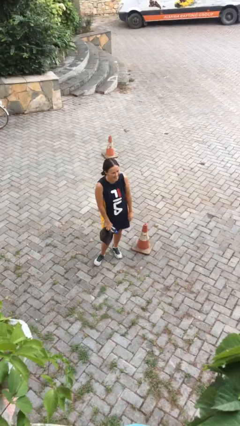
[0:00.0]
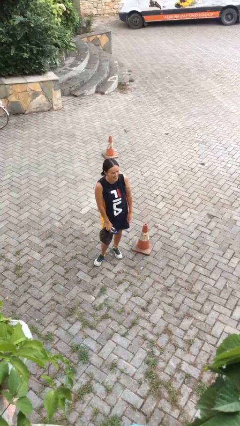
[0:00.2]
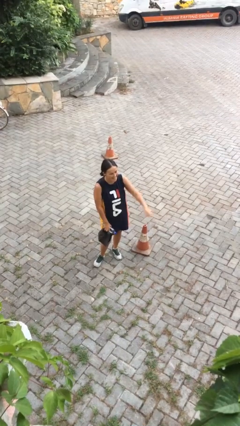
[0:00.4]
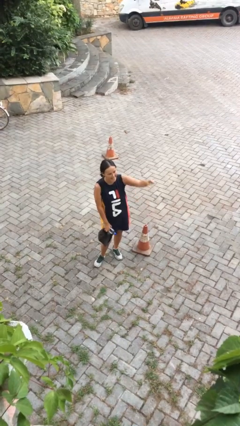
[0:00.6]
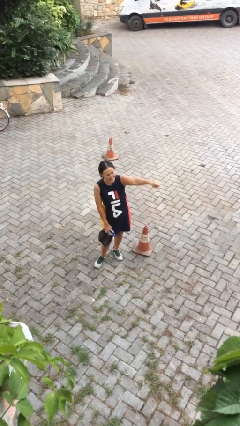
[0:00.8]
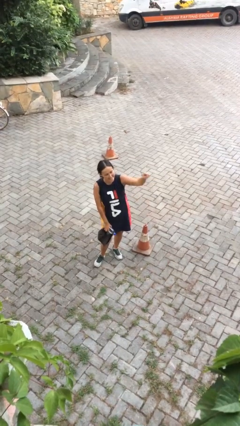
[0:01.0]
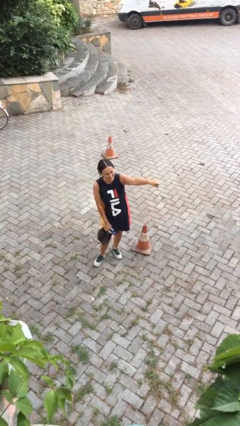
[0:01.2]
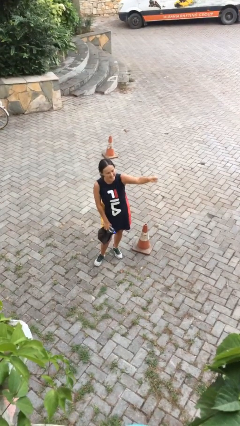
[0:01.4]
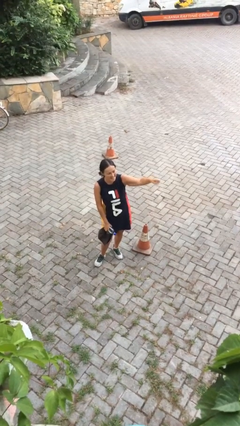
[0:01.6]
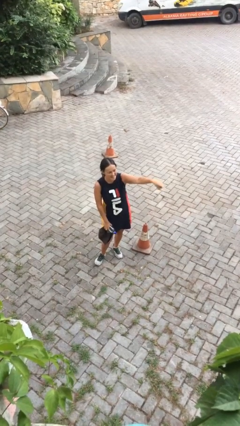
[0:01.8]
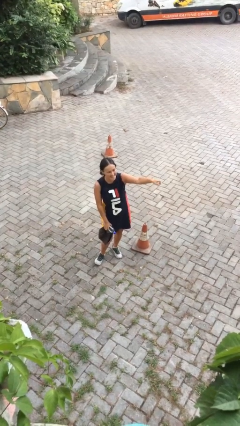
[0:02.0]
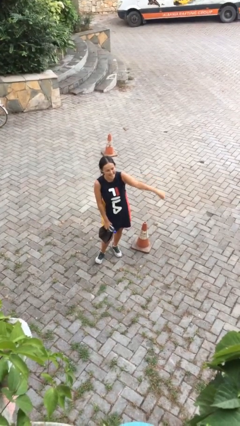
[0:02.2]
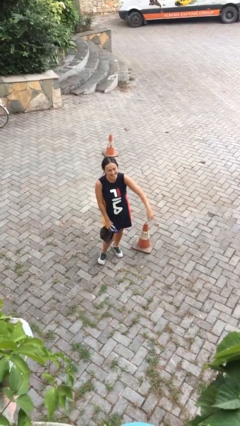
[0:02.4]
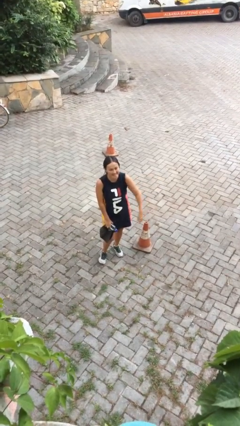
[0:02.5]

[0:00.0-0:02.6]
person points at person

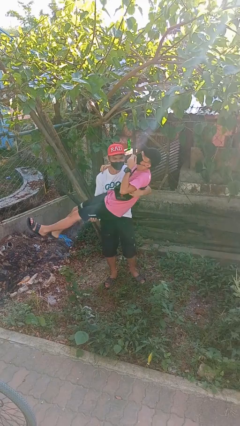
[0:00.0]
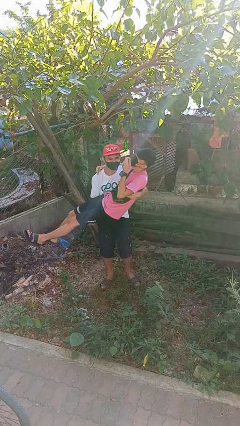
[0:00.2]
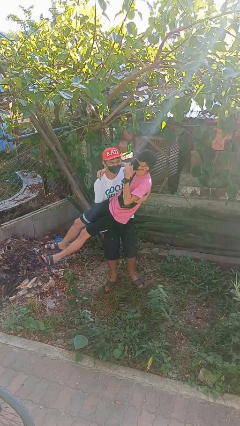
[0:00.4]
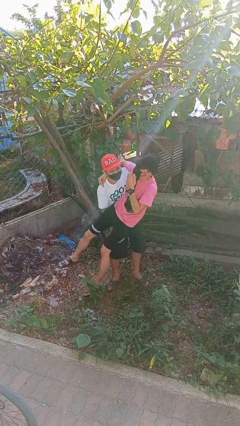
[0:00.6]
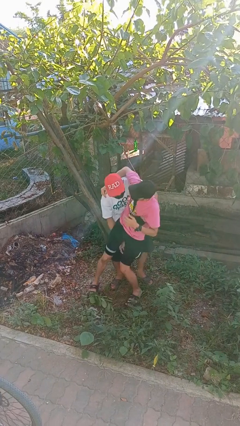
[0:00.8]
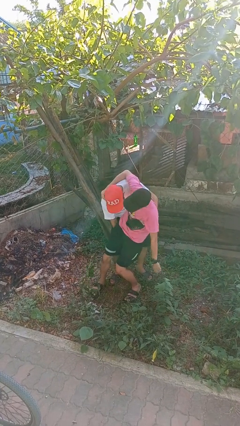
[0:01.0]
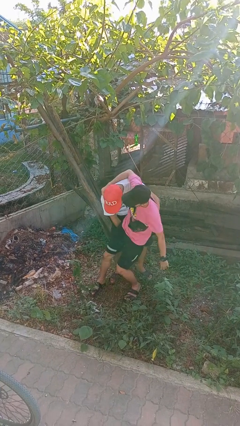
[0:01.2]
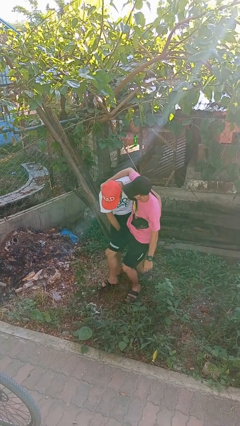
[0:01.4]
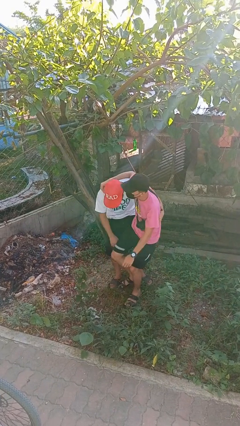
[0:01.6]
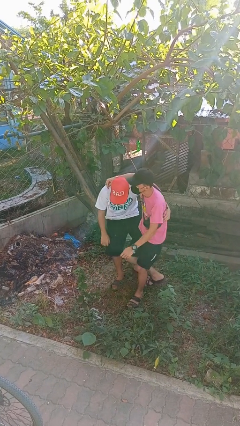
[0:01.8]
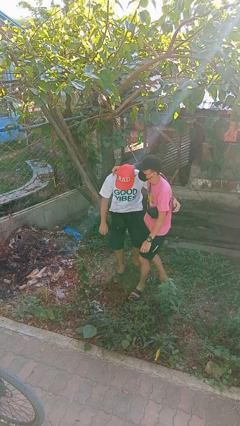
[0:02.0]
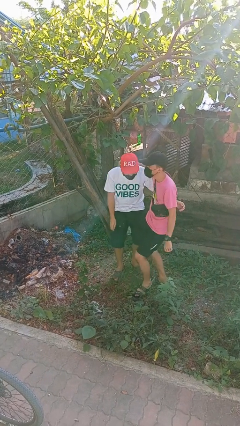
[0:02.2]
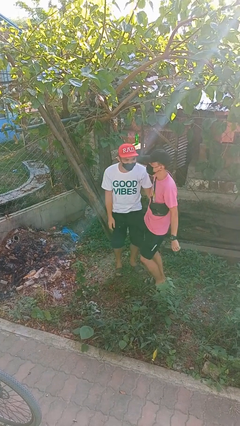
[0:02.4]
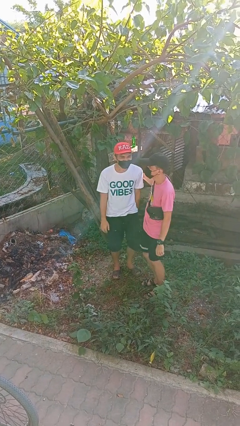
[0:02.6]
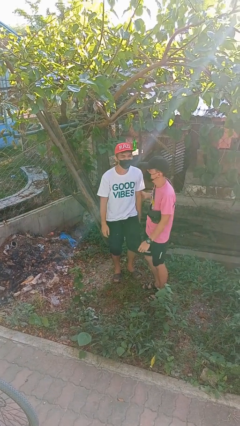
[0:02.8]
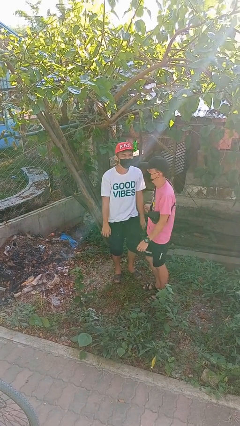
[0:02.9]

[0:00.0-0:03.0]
person puts down person

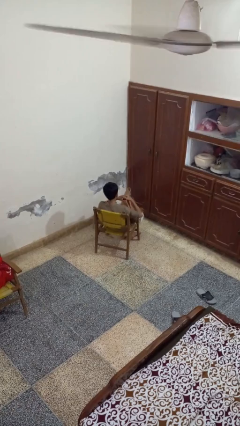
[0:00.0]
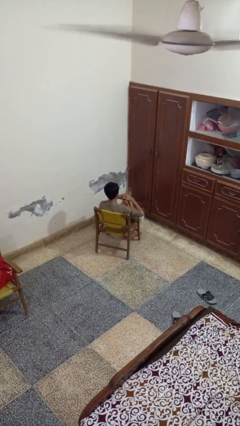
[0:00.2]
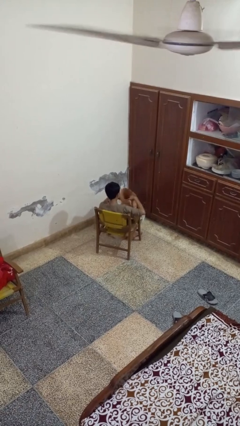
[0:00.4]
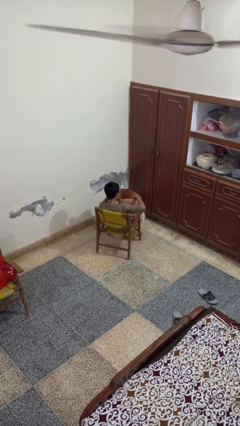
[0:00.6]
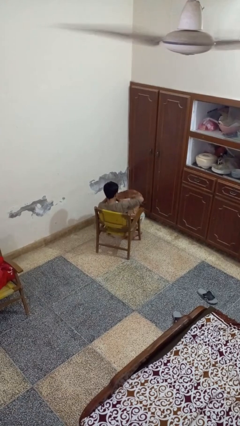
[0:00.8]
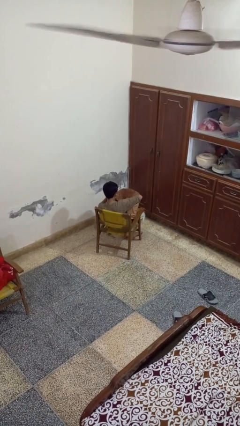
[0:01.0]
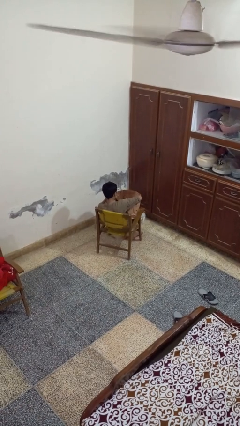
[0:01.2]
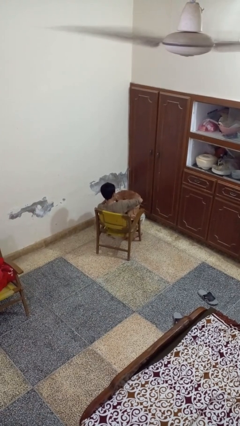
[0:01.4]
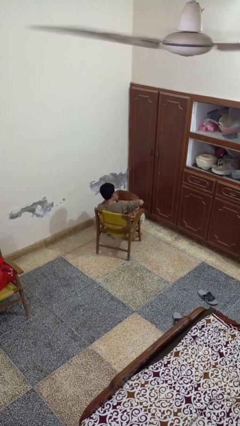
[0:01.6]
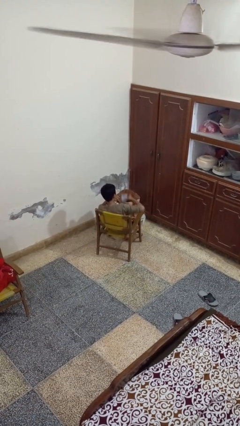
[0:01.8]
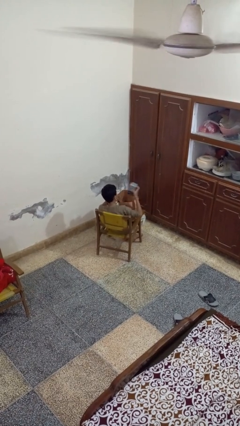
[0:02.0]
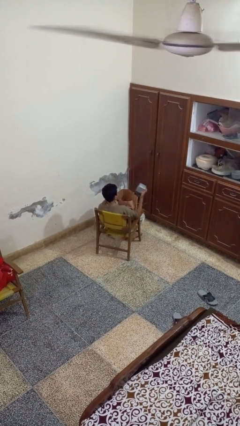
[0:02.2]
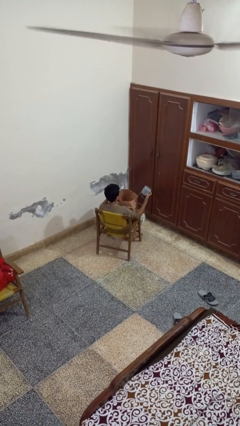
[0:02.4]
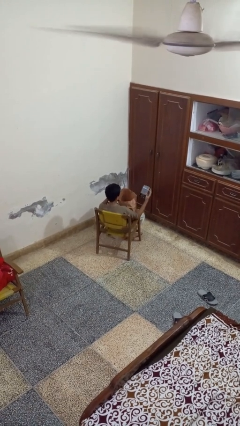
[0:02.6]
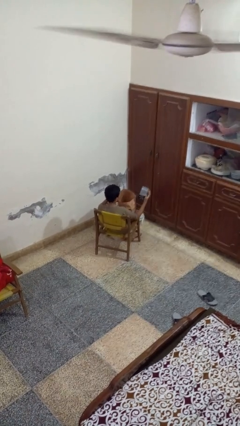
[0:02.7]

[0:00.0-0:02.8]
person takes object from bag

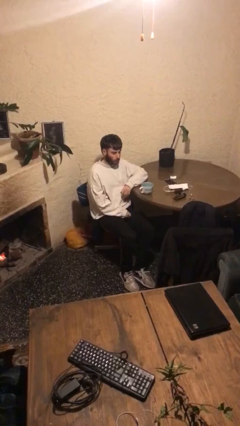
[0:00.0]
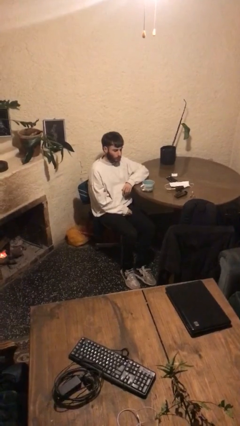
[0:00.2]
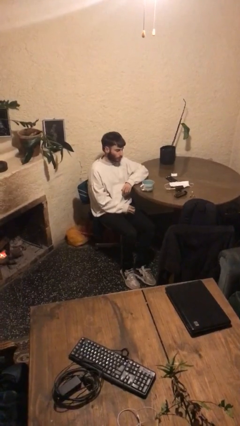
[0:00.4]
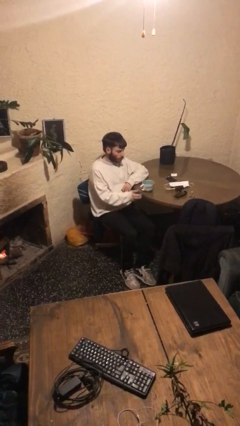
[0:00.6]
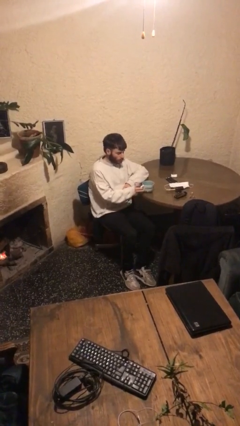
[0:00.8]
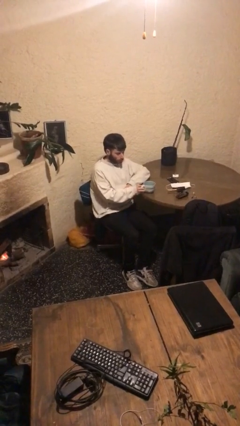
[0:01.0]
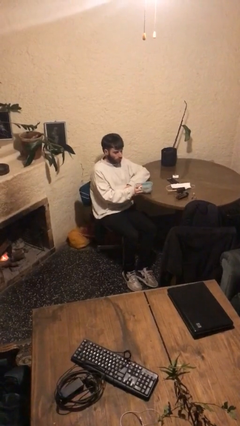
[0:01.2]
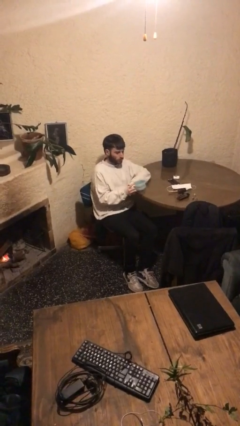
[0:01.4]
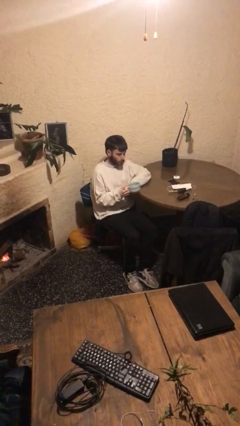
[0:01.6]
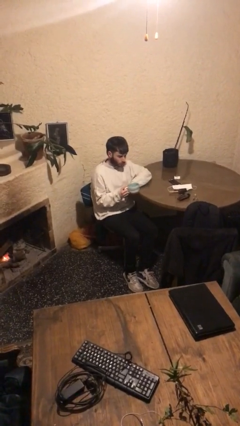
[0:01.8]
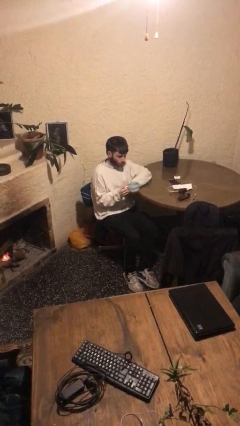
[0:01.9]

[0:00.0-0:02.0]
person picks up object from table

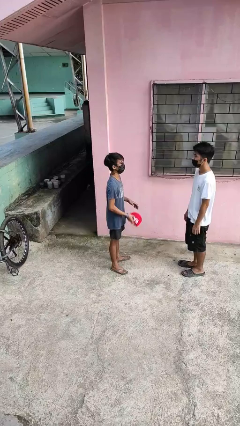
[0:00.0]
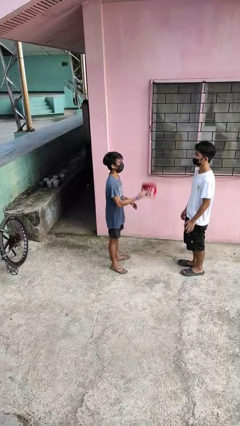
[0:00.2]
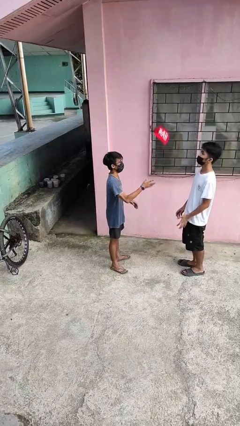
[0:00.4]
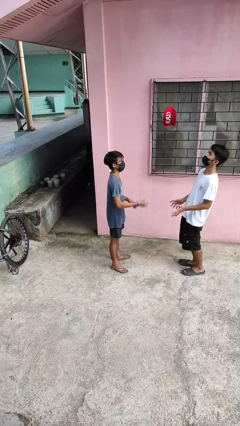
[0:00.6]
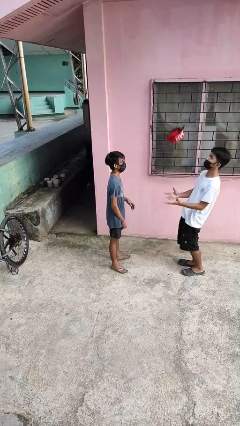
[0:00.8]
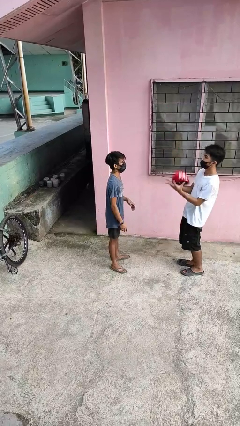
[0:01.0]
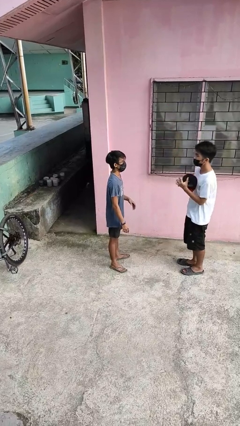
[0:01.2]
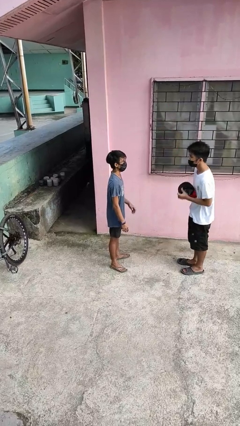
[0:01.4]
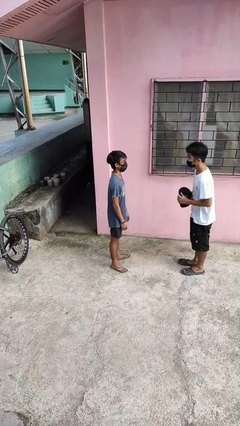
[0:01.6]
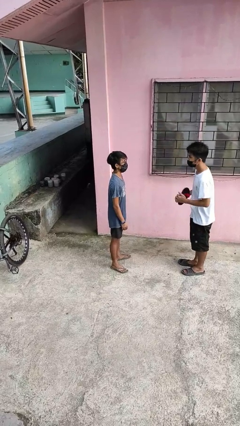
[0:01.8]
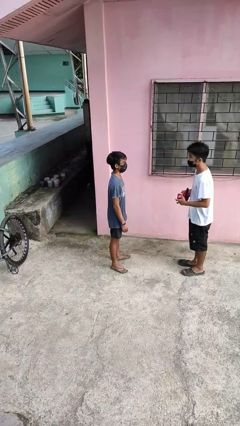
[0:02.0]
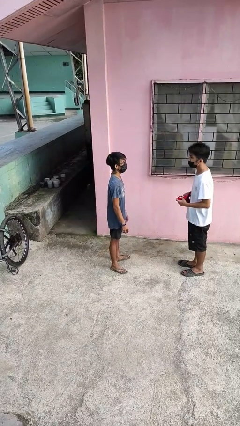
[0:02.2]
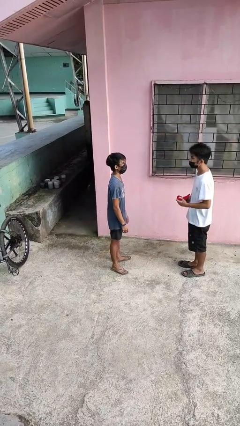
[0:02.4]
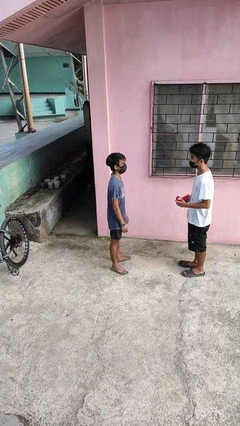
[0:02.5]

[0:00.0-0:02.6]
person throws object to person

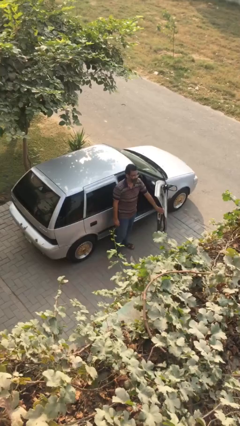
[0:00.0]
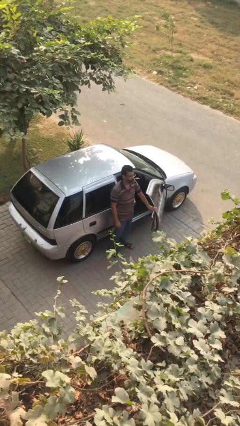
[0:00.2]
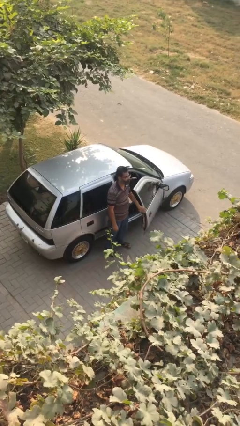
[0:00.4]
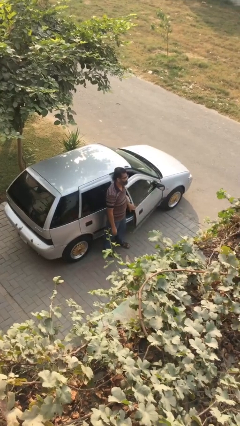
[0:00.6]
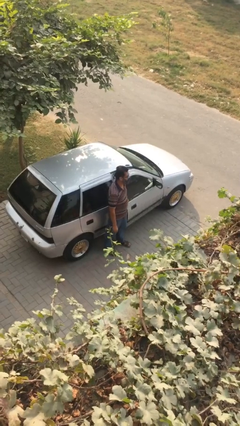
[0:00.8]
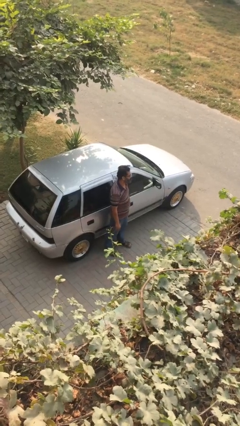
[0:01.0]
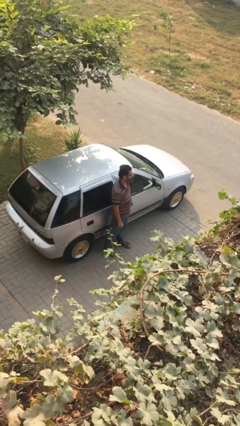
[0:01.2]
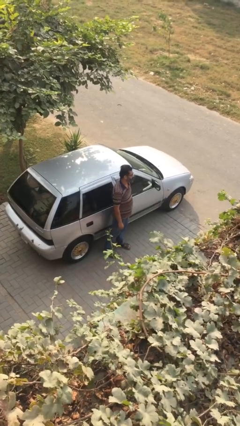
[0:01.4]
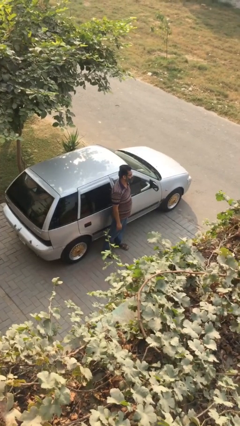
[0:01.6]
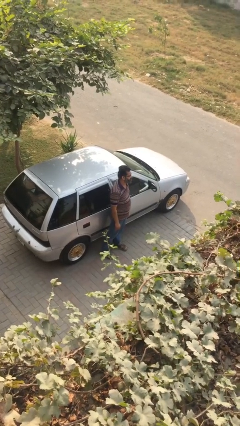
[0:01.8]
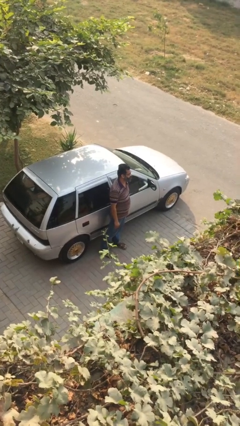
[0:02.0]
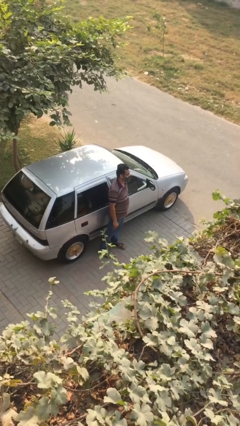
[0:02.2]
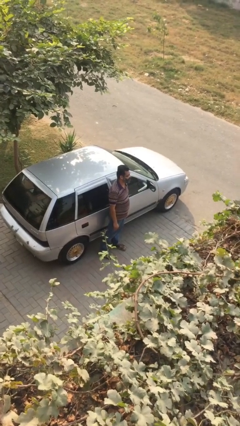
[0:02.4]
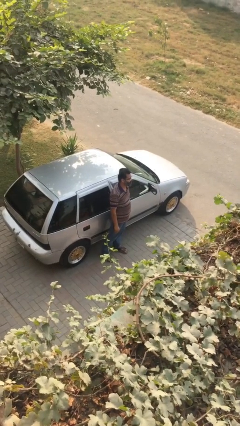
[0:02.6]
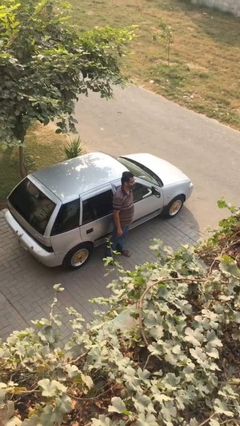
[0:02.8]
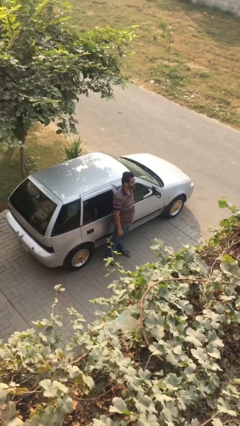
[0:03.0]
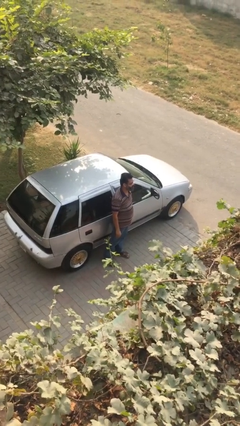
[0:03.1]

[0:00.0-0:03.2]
person closes car door

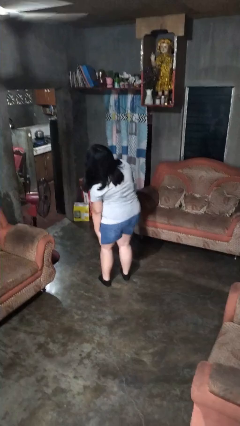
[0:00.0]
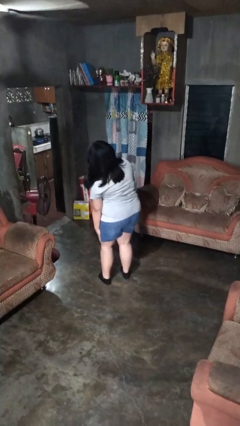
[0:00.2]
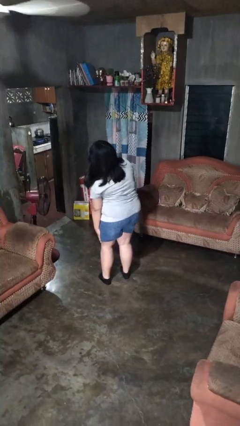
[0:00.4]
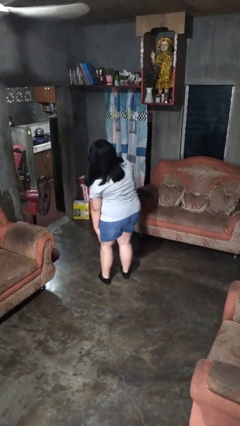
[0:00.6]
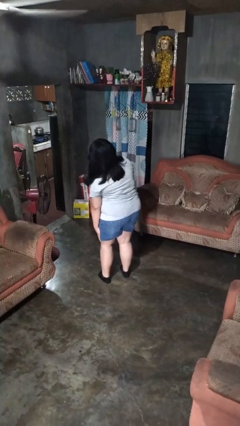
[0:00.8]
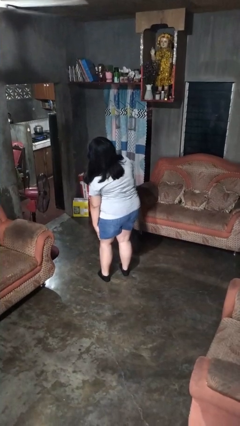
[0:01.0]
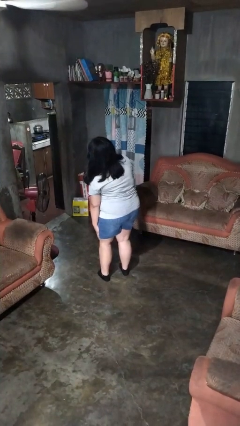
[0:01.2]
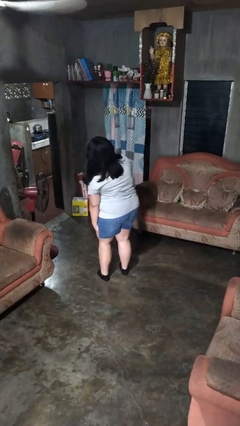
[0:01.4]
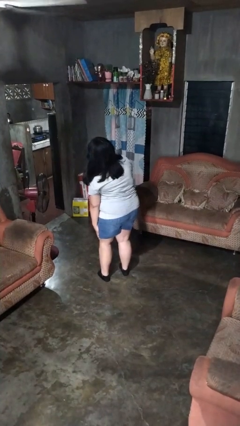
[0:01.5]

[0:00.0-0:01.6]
person swats bug
